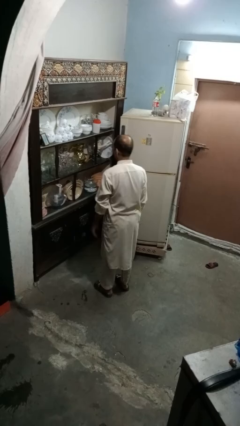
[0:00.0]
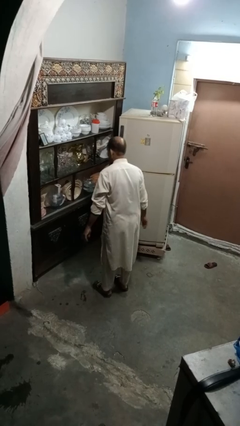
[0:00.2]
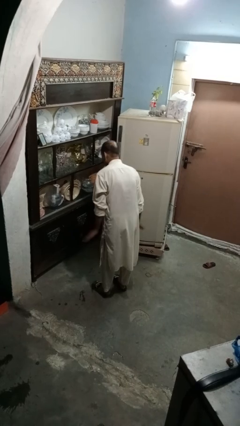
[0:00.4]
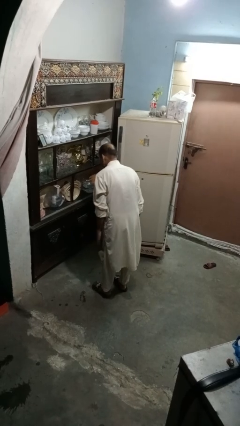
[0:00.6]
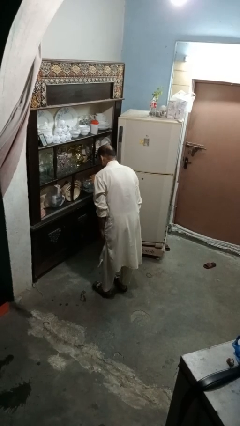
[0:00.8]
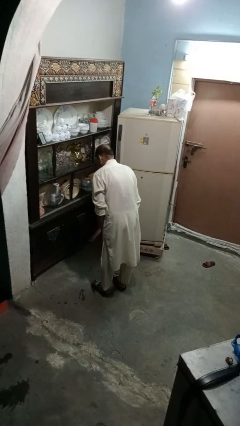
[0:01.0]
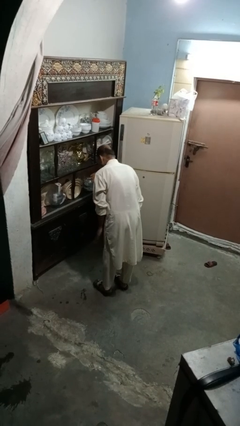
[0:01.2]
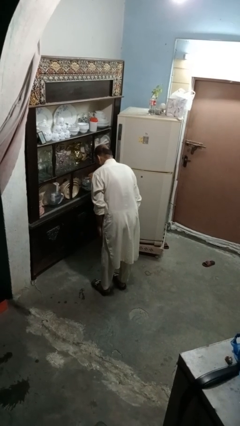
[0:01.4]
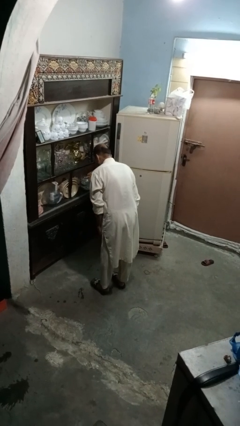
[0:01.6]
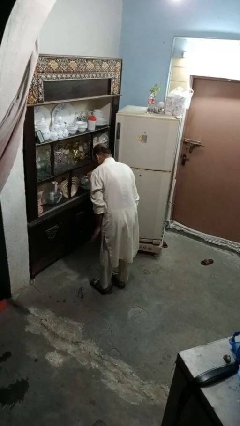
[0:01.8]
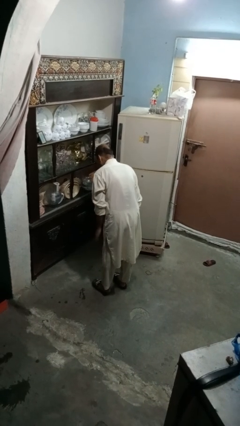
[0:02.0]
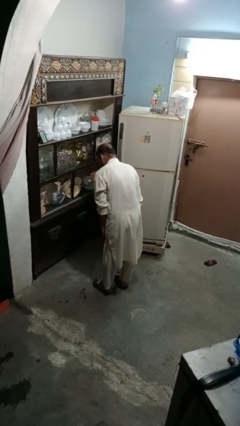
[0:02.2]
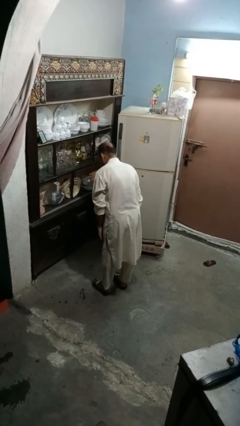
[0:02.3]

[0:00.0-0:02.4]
person slaps hands on thighs

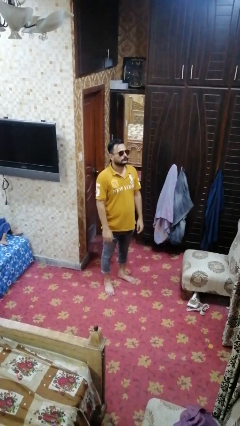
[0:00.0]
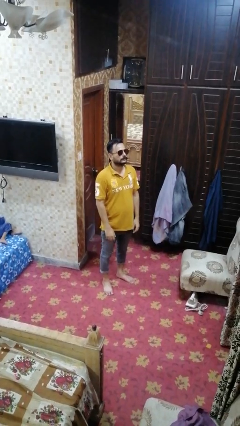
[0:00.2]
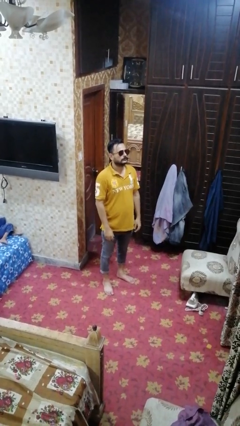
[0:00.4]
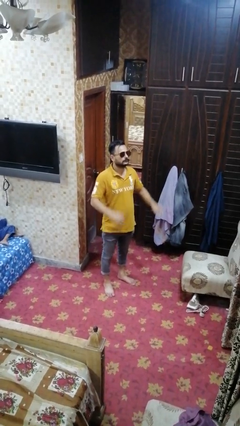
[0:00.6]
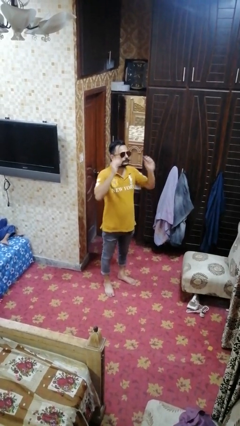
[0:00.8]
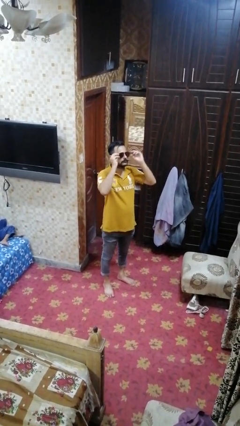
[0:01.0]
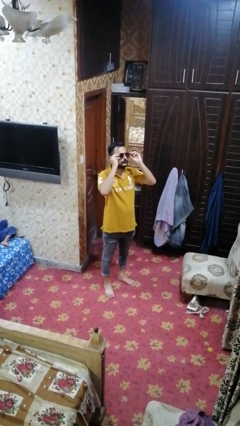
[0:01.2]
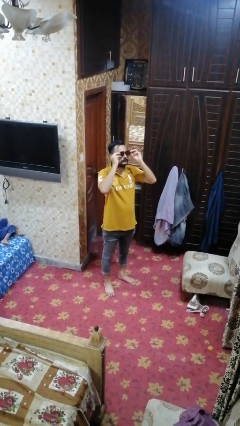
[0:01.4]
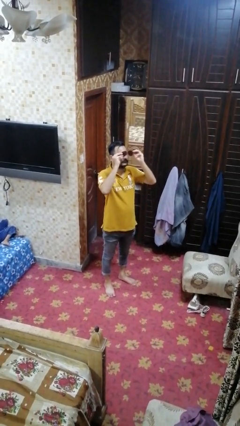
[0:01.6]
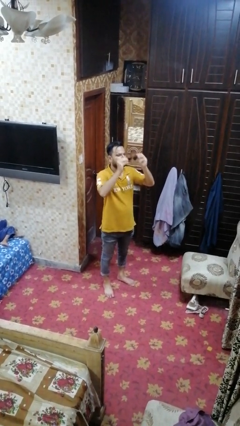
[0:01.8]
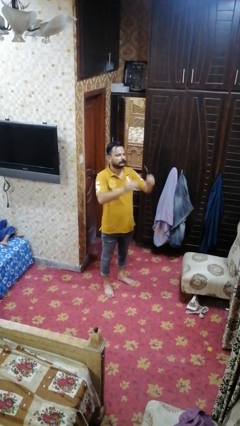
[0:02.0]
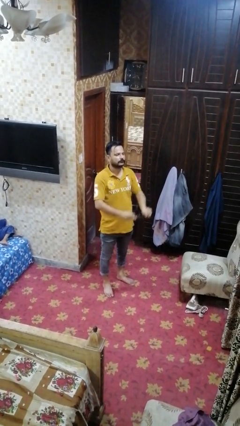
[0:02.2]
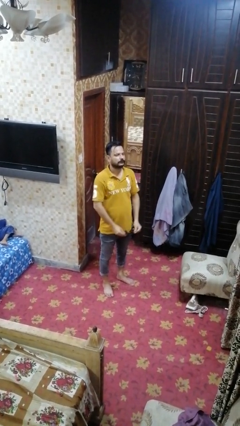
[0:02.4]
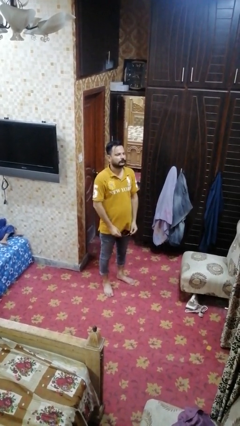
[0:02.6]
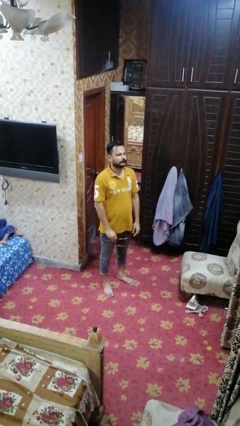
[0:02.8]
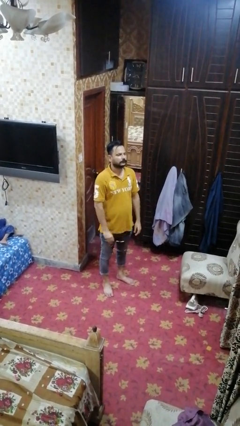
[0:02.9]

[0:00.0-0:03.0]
person takes off sunglasses

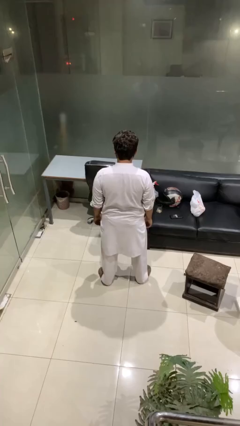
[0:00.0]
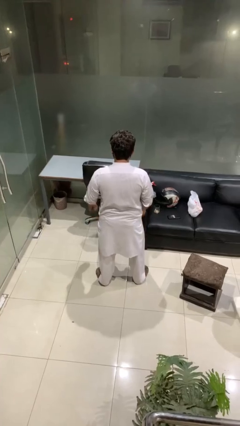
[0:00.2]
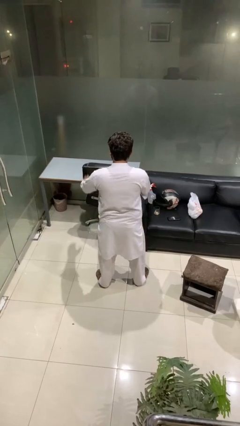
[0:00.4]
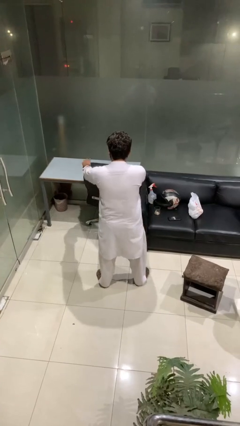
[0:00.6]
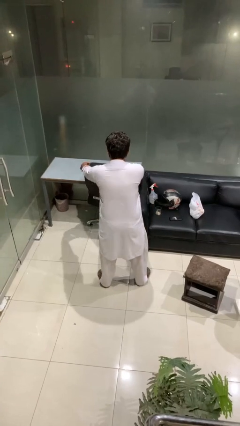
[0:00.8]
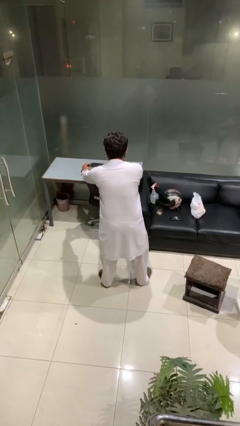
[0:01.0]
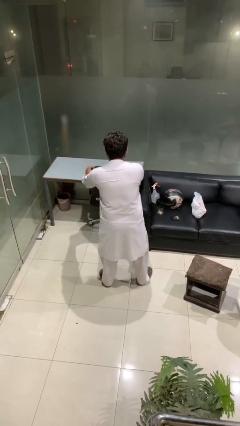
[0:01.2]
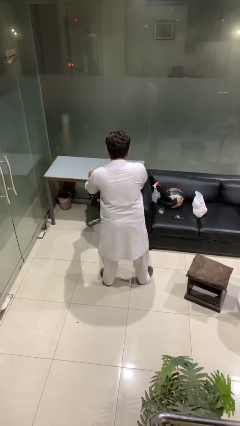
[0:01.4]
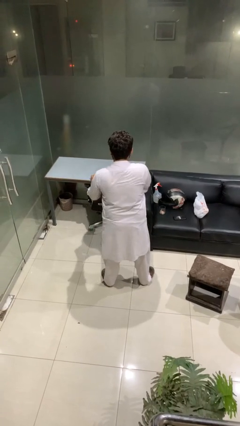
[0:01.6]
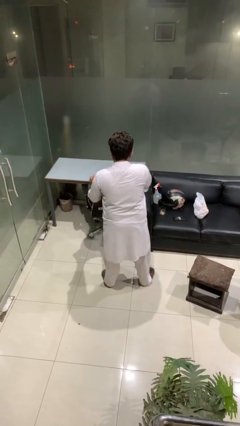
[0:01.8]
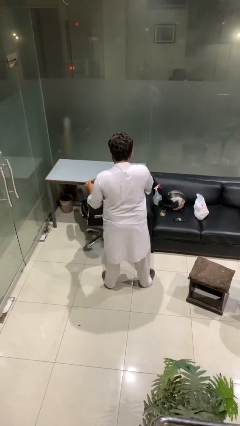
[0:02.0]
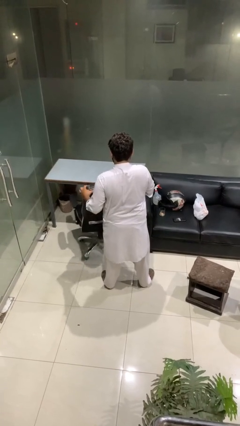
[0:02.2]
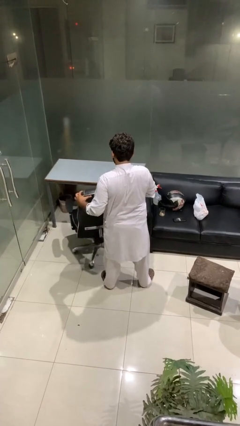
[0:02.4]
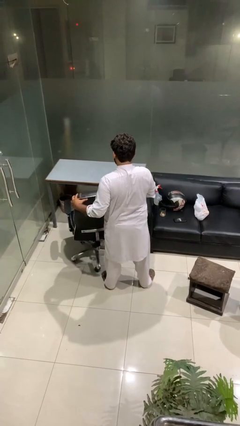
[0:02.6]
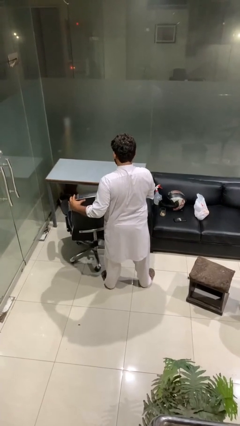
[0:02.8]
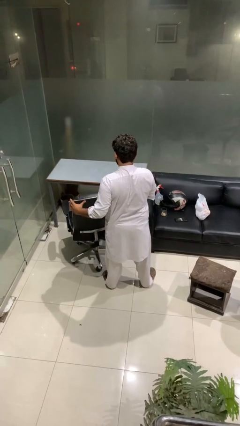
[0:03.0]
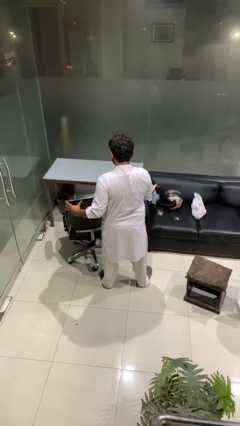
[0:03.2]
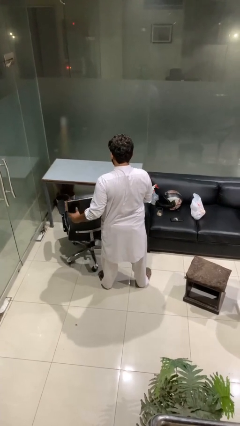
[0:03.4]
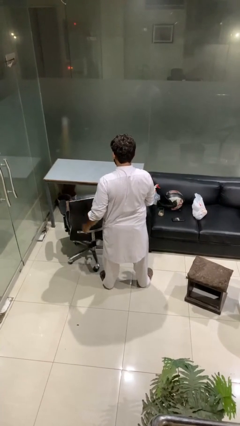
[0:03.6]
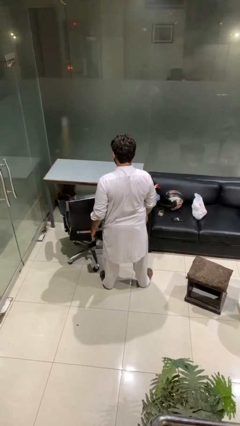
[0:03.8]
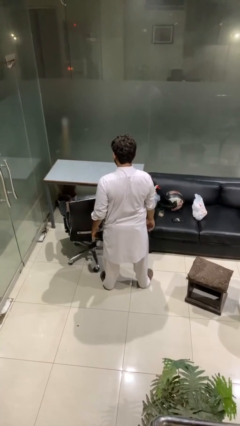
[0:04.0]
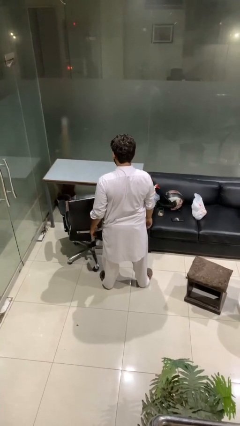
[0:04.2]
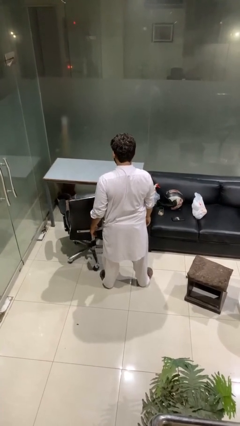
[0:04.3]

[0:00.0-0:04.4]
person pulls out chair

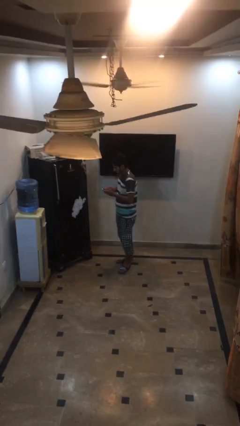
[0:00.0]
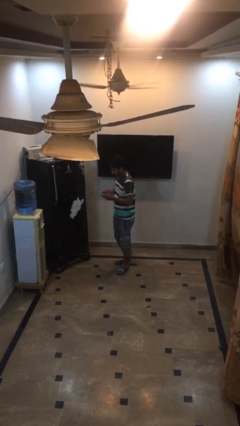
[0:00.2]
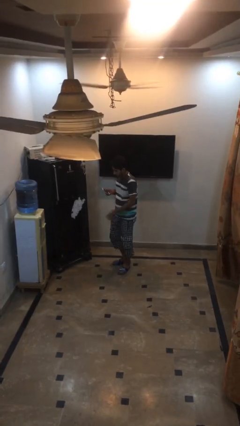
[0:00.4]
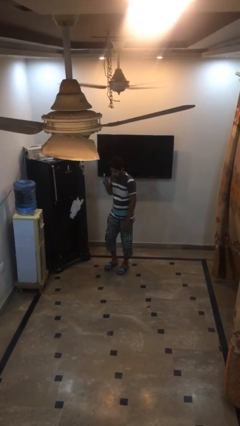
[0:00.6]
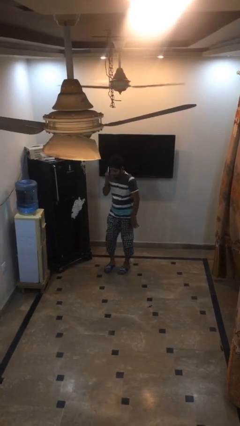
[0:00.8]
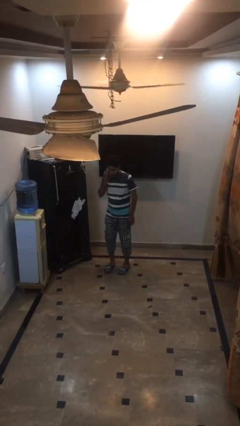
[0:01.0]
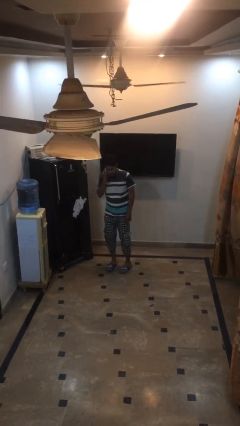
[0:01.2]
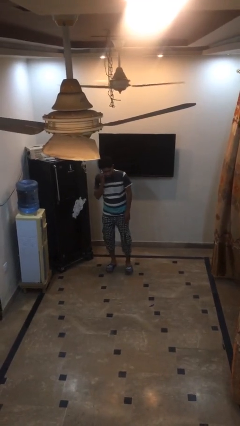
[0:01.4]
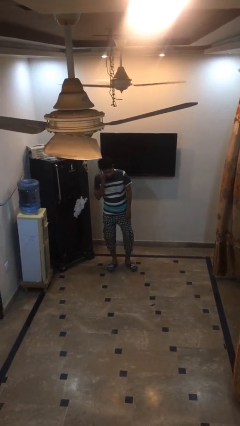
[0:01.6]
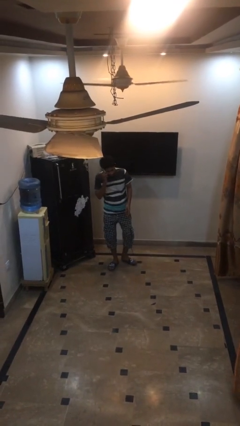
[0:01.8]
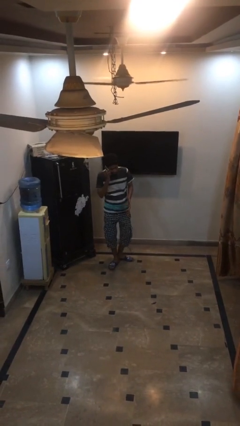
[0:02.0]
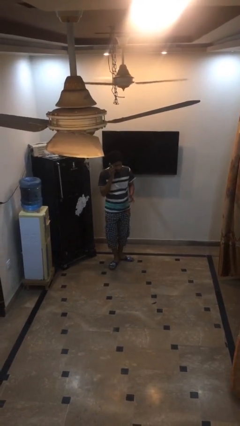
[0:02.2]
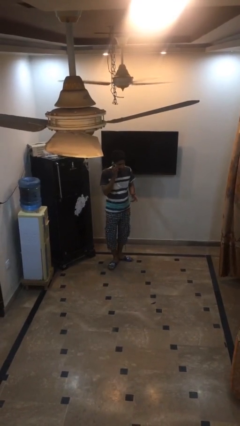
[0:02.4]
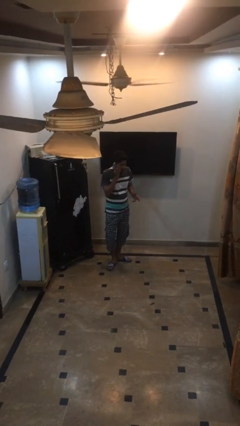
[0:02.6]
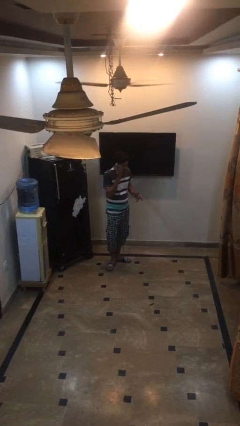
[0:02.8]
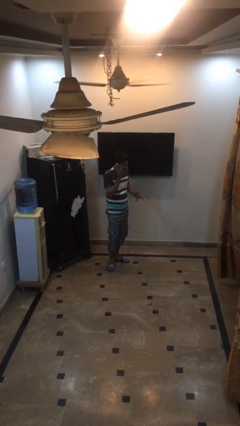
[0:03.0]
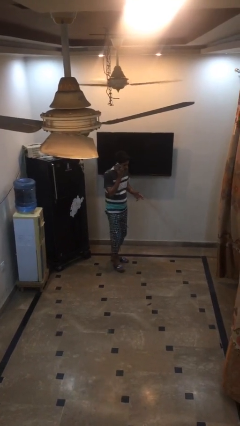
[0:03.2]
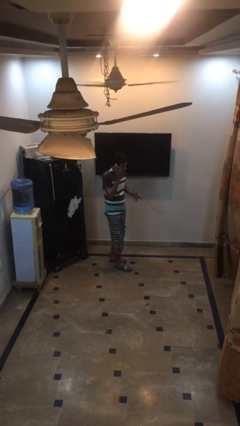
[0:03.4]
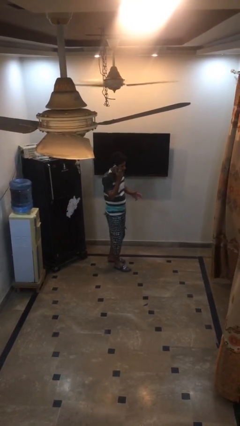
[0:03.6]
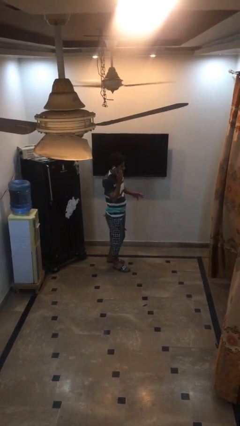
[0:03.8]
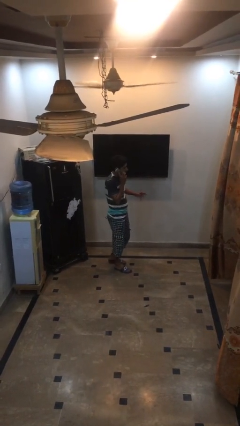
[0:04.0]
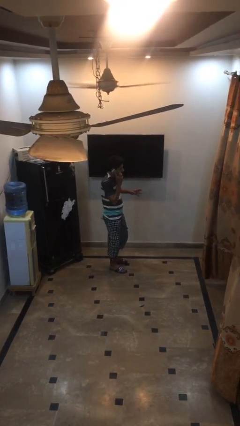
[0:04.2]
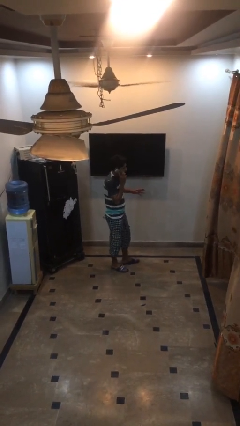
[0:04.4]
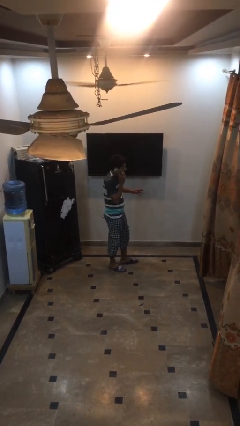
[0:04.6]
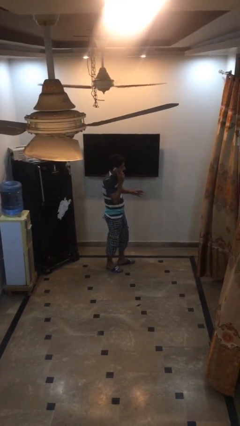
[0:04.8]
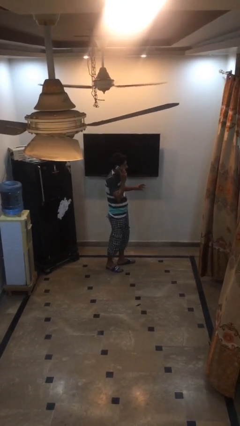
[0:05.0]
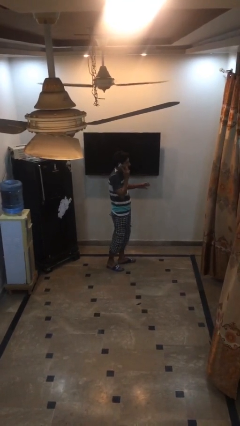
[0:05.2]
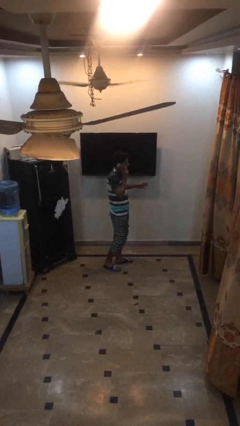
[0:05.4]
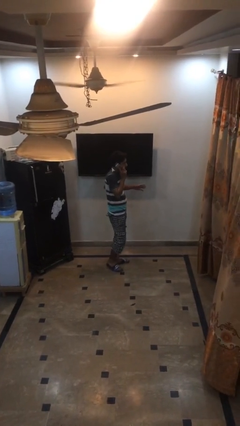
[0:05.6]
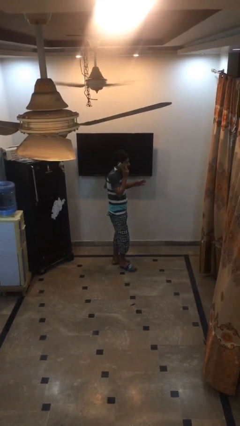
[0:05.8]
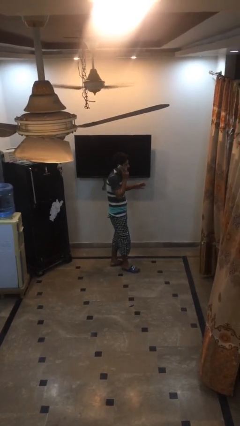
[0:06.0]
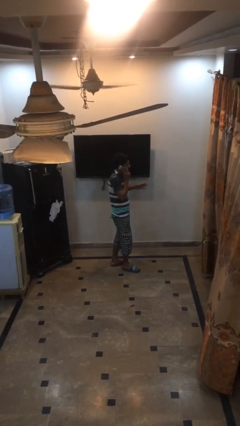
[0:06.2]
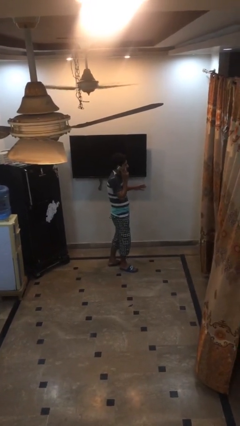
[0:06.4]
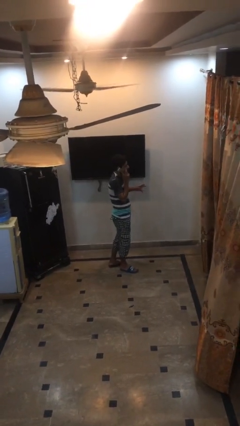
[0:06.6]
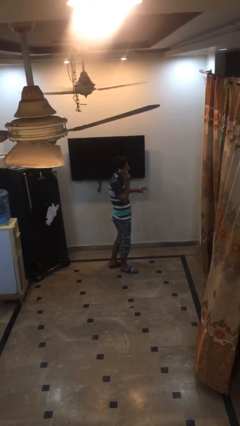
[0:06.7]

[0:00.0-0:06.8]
person talks on phone

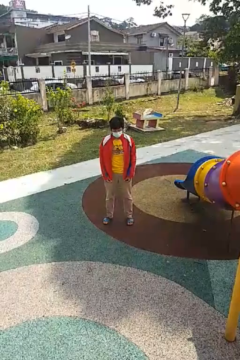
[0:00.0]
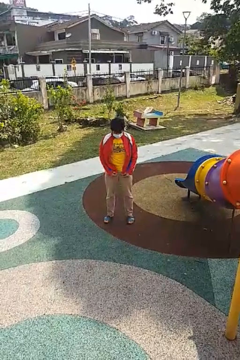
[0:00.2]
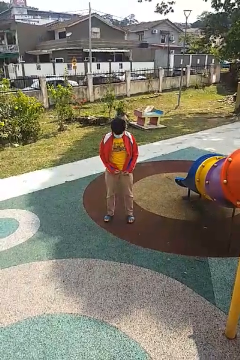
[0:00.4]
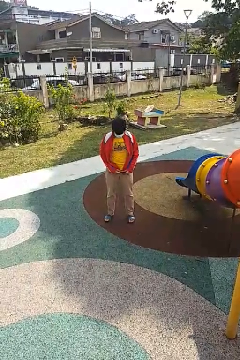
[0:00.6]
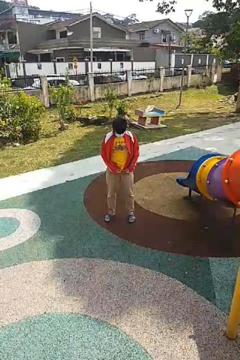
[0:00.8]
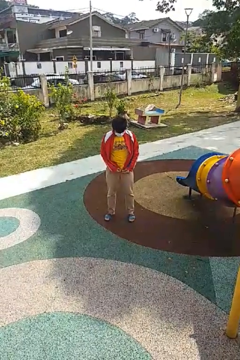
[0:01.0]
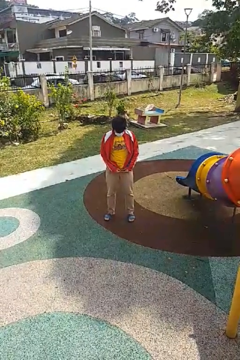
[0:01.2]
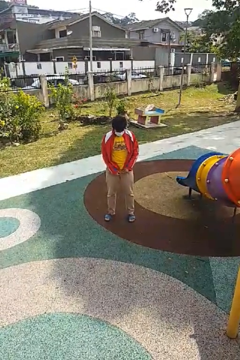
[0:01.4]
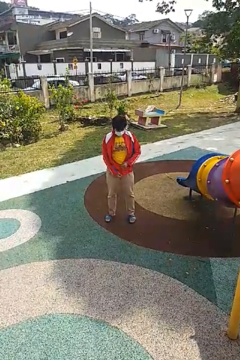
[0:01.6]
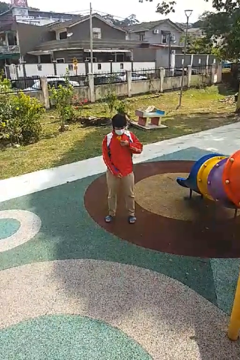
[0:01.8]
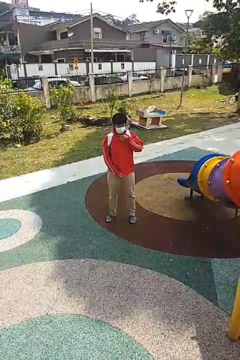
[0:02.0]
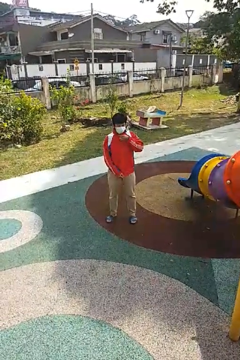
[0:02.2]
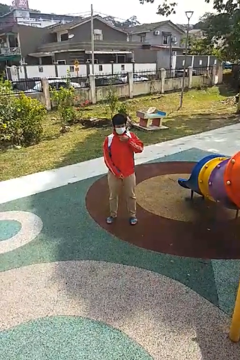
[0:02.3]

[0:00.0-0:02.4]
person zips up jacket
